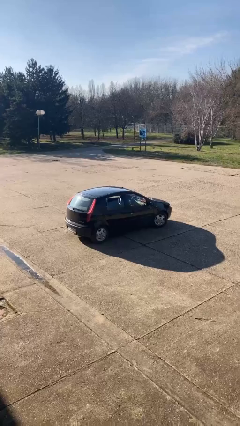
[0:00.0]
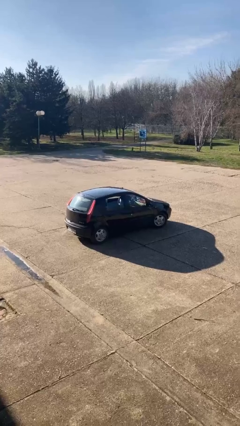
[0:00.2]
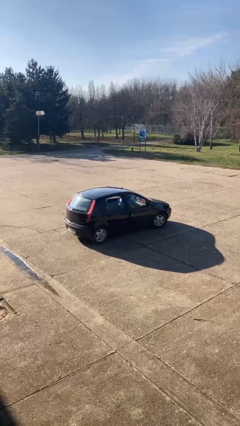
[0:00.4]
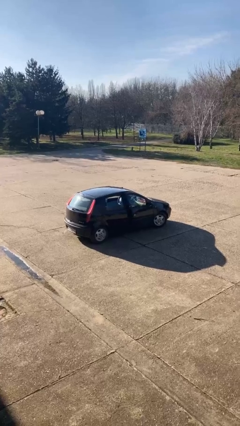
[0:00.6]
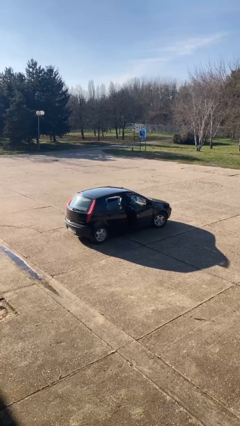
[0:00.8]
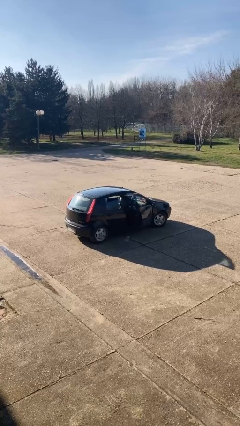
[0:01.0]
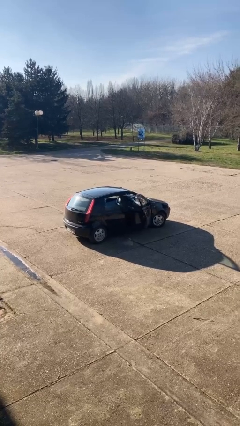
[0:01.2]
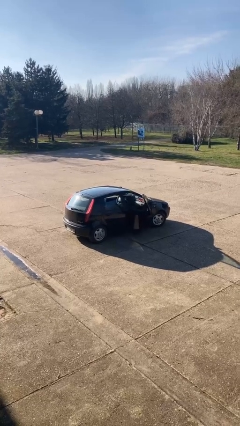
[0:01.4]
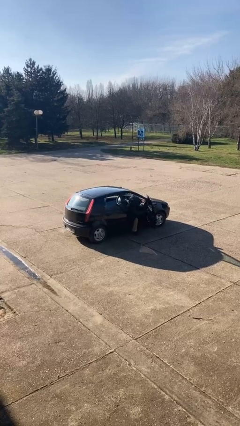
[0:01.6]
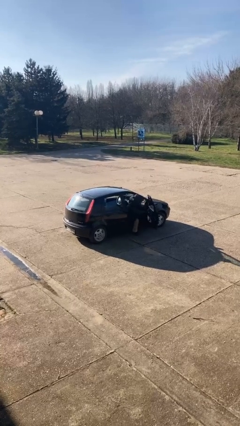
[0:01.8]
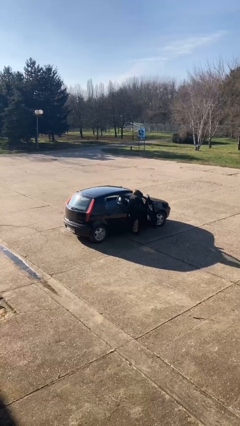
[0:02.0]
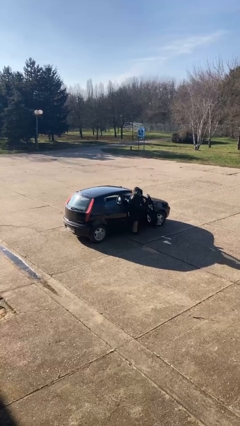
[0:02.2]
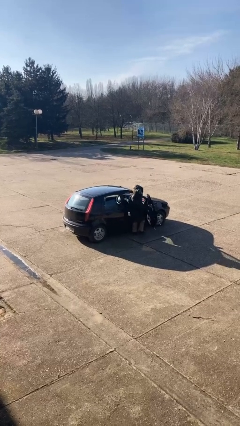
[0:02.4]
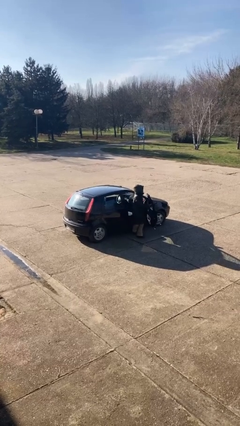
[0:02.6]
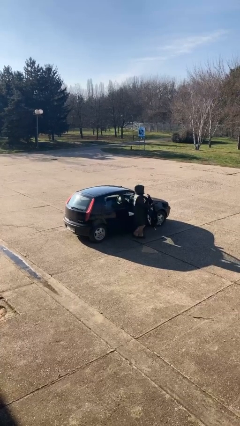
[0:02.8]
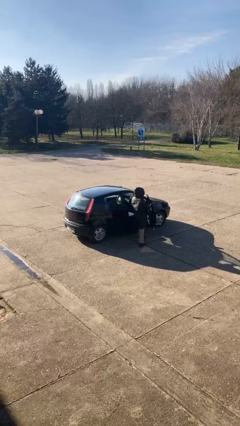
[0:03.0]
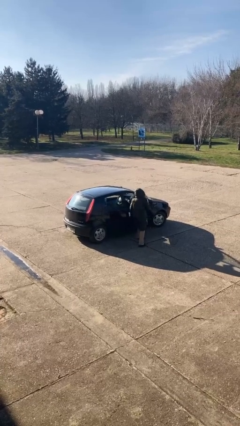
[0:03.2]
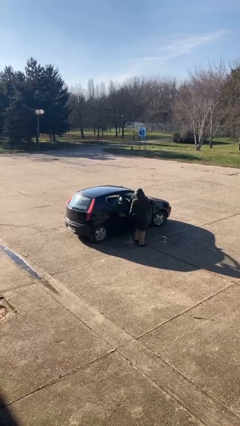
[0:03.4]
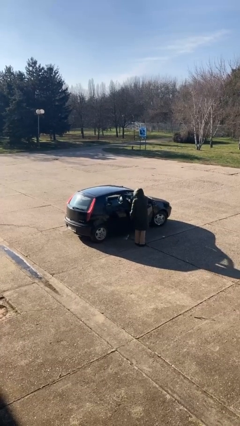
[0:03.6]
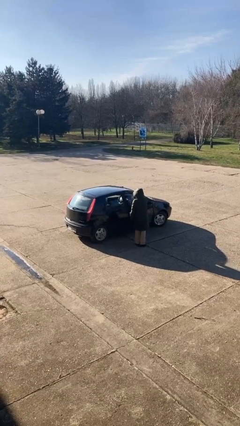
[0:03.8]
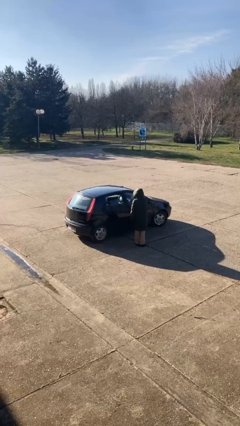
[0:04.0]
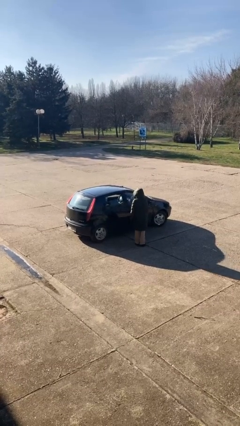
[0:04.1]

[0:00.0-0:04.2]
car drops off person

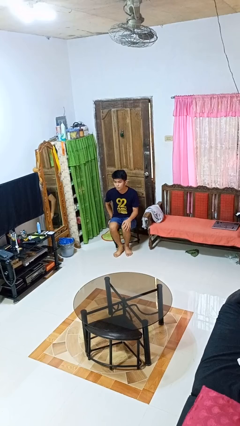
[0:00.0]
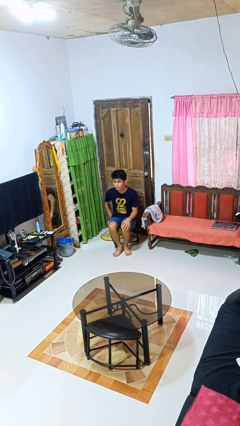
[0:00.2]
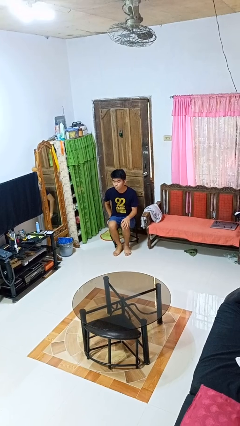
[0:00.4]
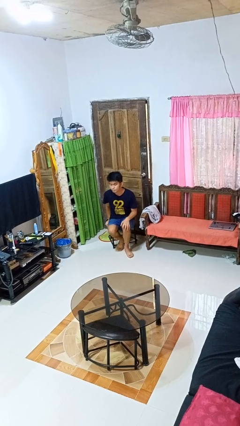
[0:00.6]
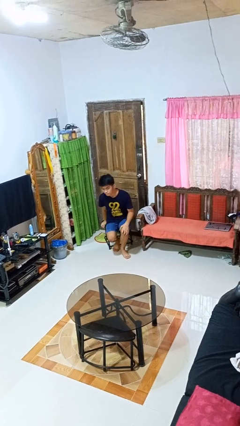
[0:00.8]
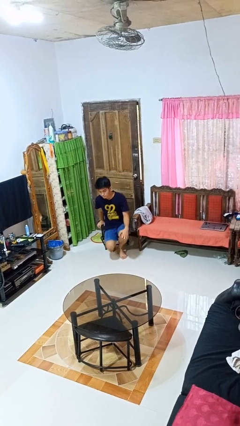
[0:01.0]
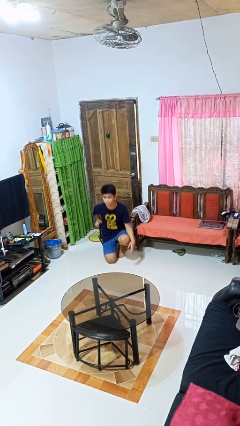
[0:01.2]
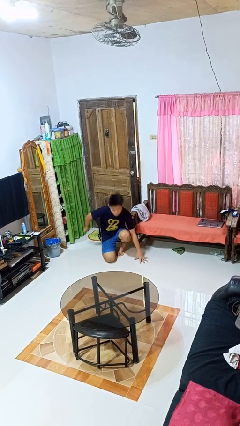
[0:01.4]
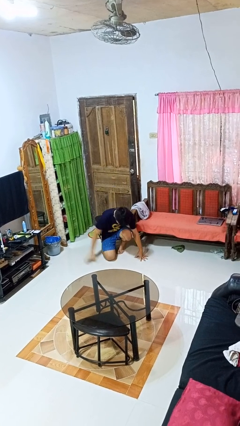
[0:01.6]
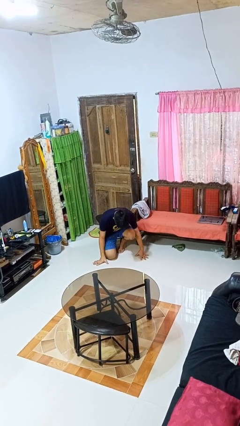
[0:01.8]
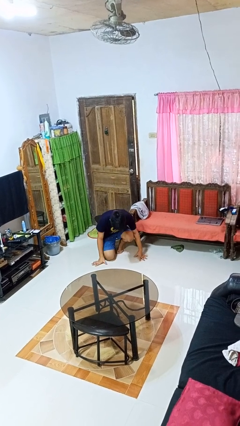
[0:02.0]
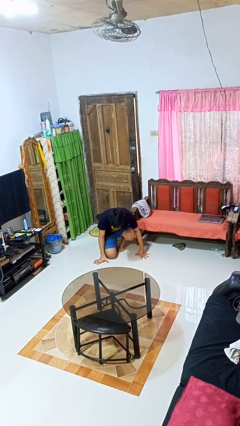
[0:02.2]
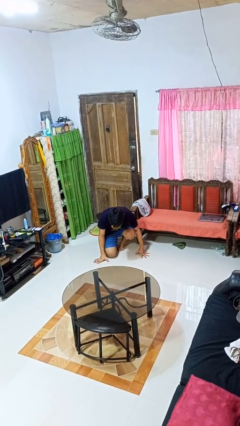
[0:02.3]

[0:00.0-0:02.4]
person falls from chair

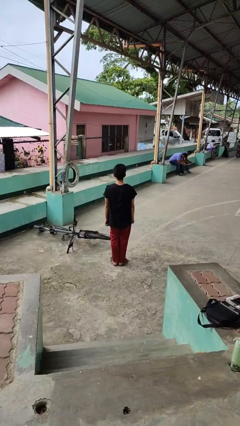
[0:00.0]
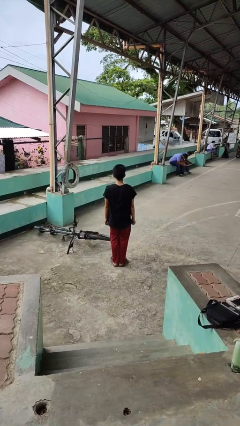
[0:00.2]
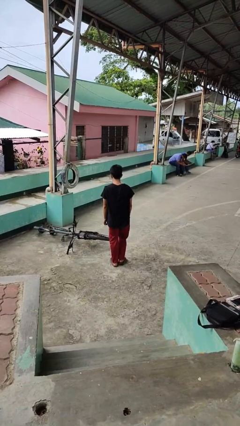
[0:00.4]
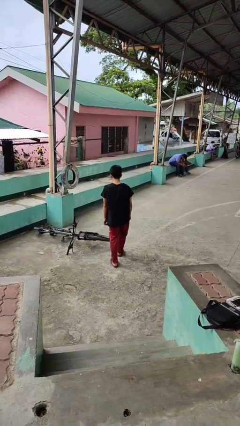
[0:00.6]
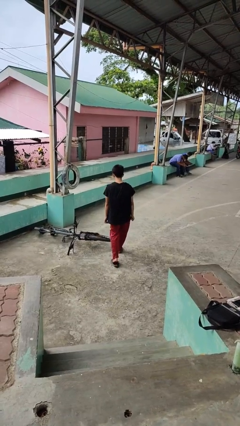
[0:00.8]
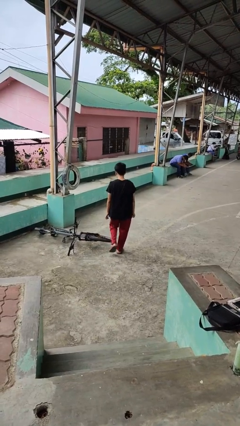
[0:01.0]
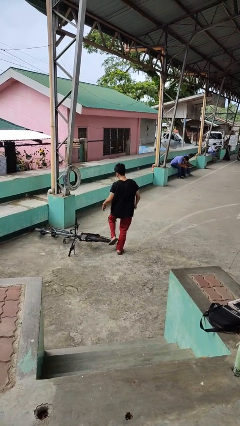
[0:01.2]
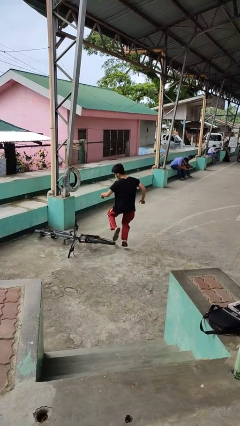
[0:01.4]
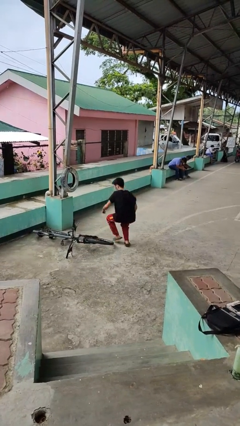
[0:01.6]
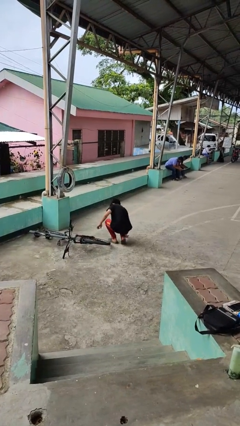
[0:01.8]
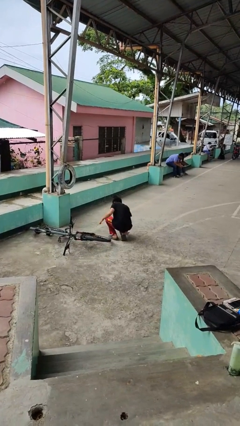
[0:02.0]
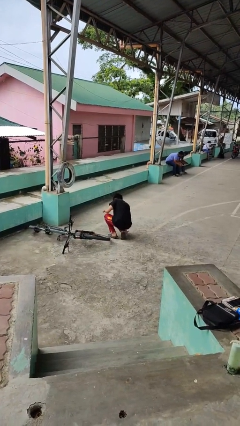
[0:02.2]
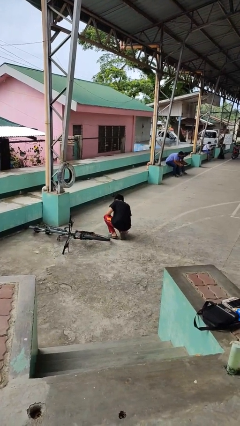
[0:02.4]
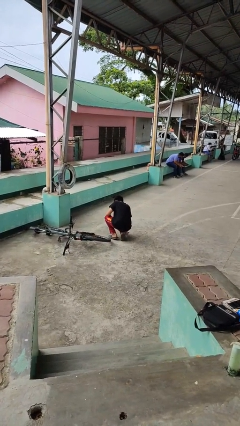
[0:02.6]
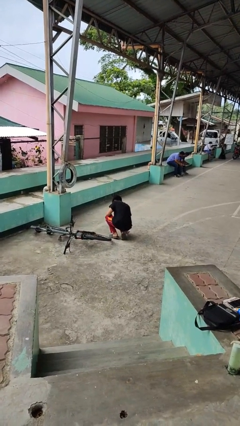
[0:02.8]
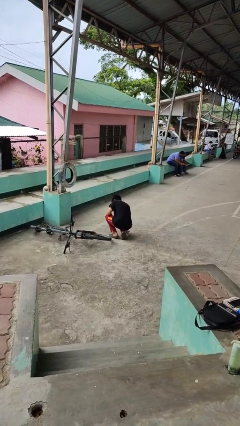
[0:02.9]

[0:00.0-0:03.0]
person trips on object on floor

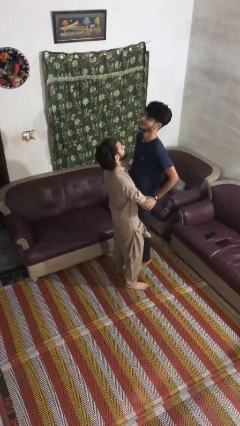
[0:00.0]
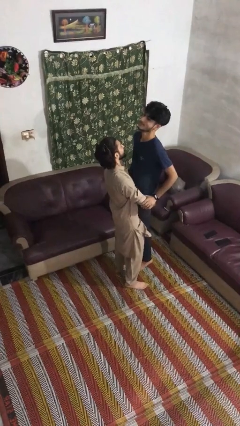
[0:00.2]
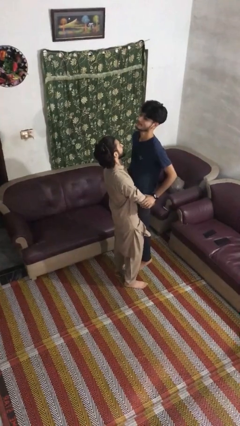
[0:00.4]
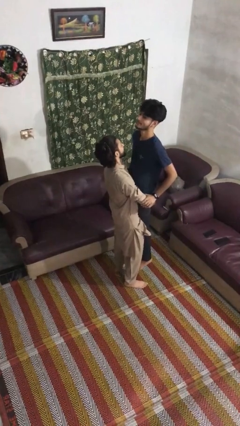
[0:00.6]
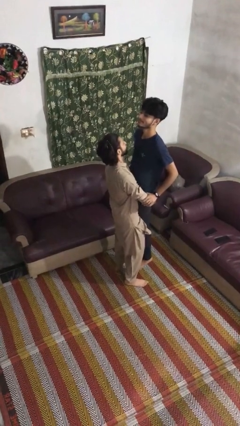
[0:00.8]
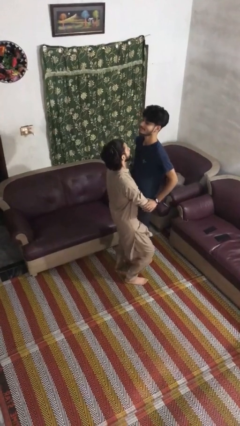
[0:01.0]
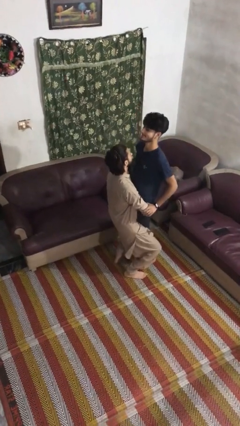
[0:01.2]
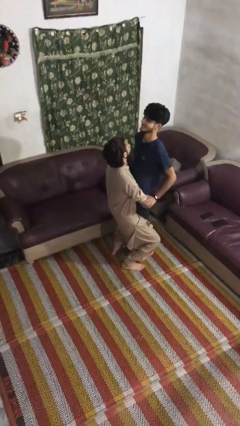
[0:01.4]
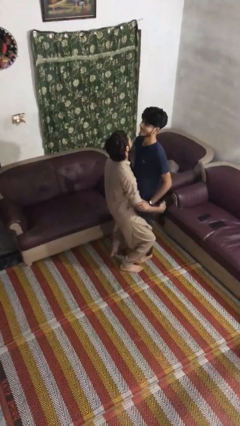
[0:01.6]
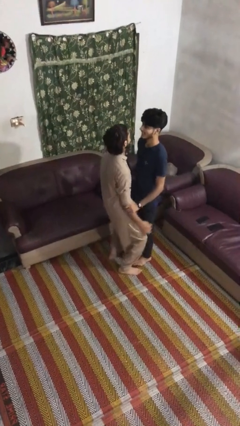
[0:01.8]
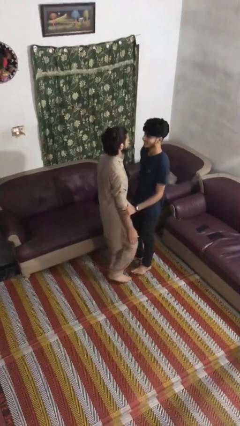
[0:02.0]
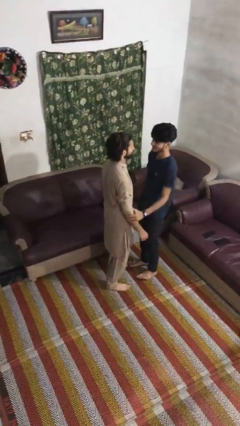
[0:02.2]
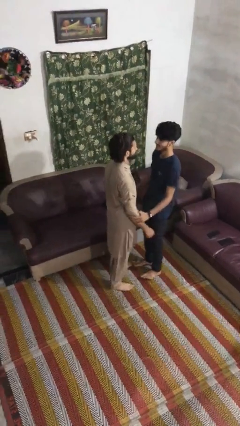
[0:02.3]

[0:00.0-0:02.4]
person puts down person

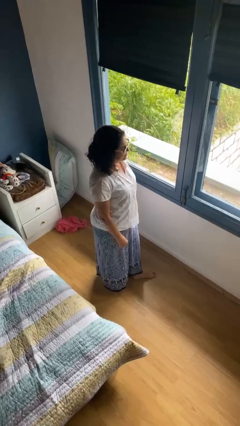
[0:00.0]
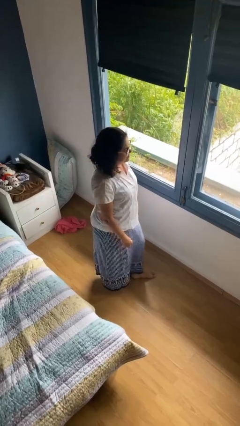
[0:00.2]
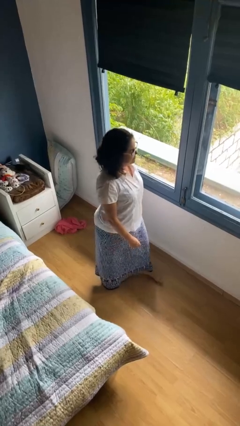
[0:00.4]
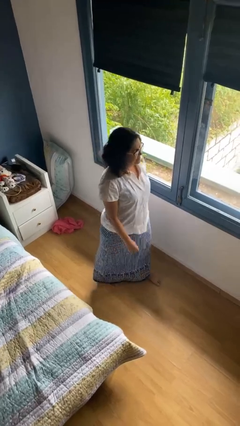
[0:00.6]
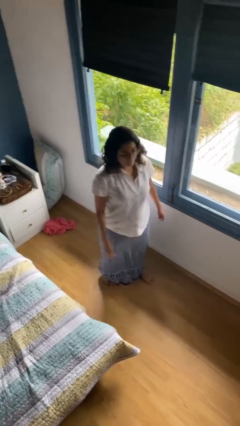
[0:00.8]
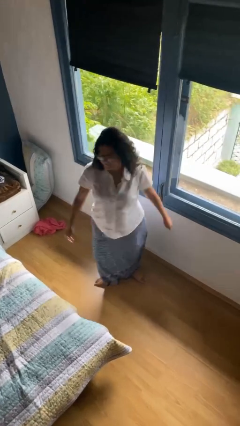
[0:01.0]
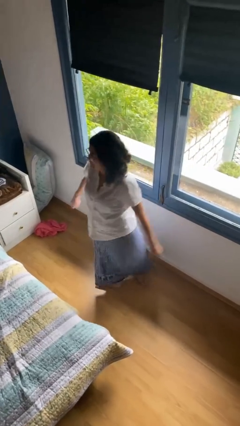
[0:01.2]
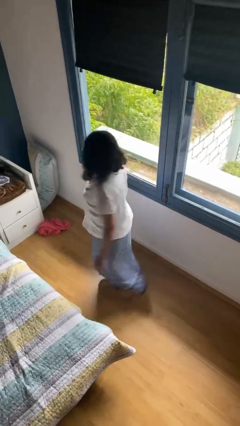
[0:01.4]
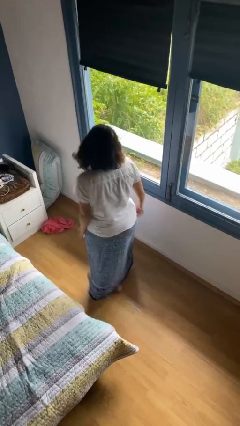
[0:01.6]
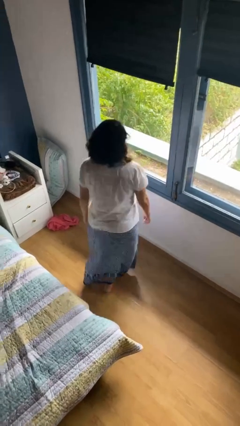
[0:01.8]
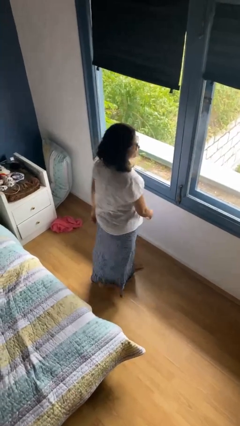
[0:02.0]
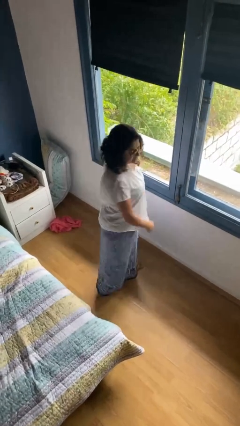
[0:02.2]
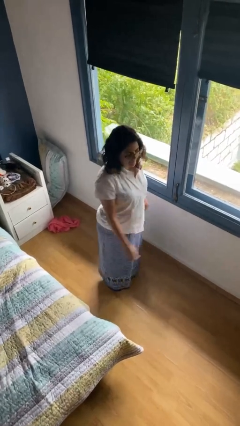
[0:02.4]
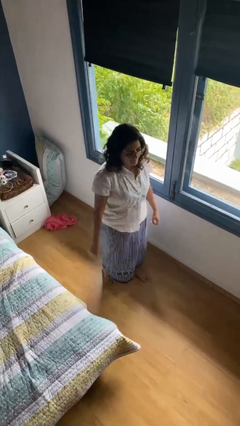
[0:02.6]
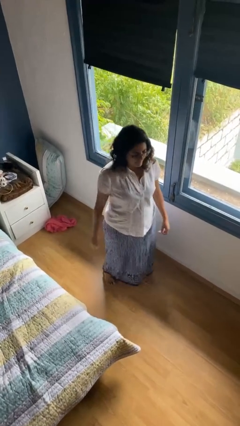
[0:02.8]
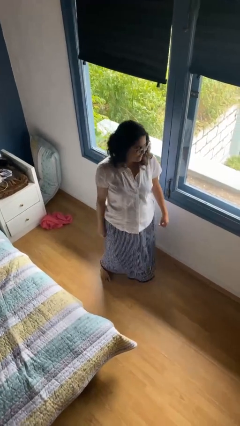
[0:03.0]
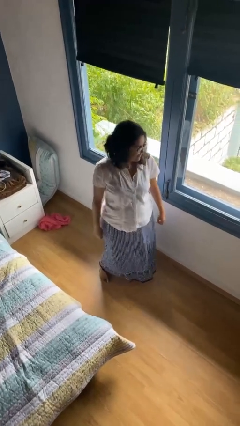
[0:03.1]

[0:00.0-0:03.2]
person twirls

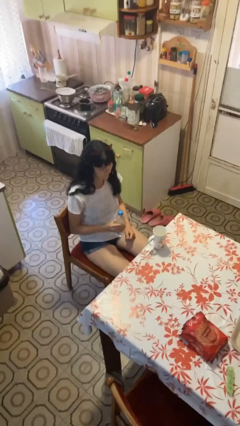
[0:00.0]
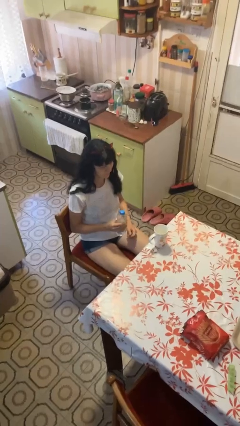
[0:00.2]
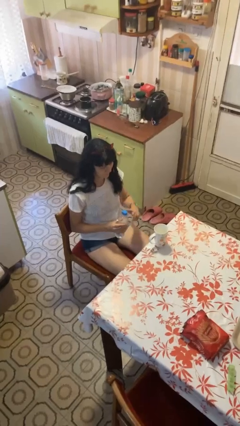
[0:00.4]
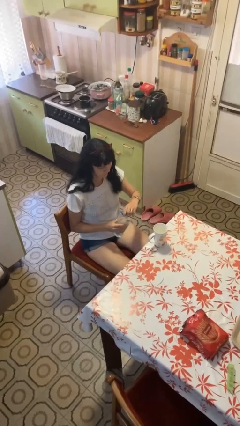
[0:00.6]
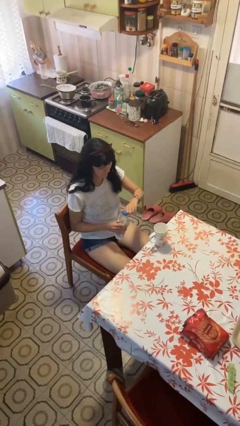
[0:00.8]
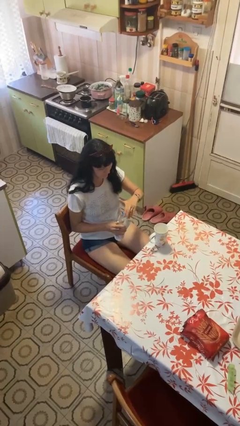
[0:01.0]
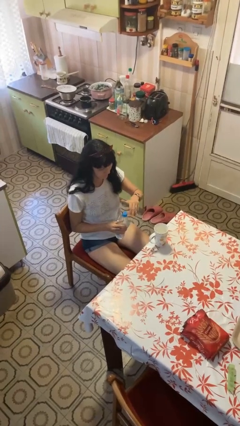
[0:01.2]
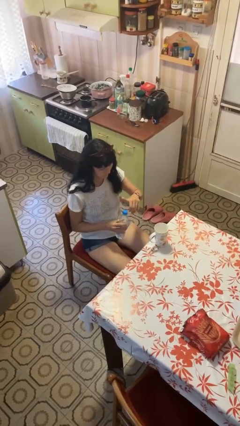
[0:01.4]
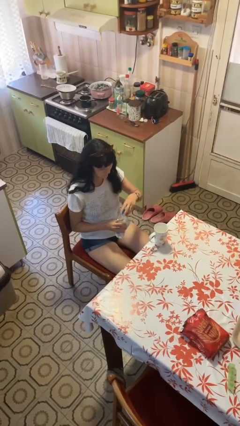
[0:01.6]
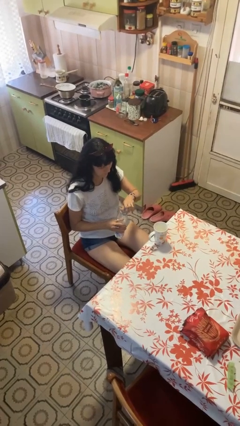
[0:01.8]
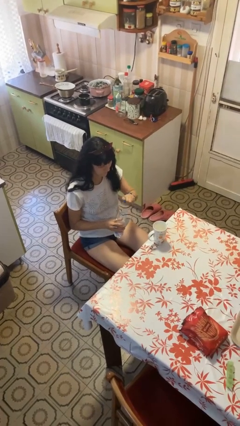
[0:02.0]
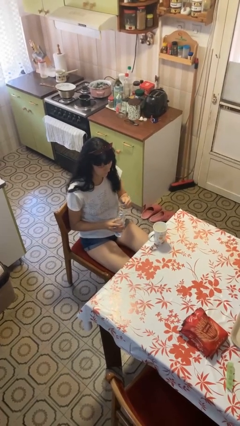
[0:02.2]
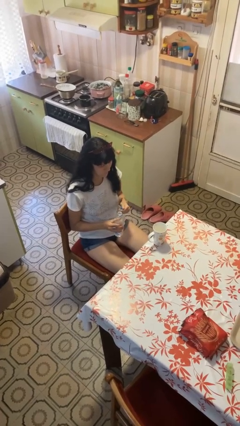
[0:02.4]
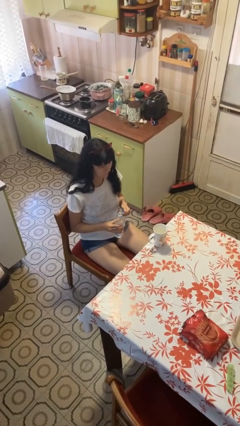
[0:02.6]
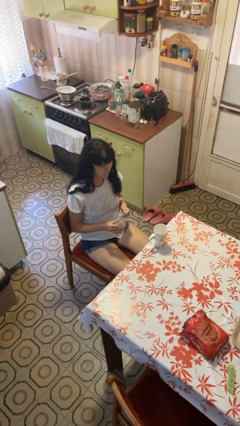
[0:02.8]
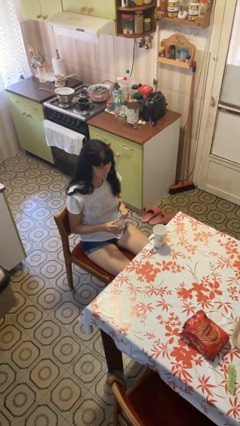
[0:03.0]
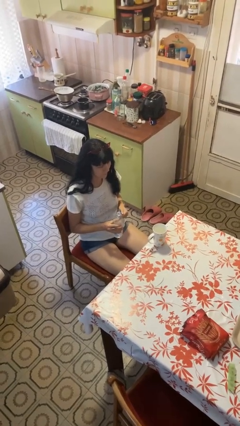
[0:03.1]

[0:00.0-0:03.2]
person unscrews lid from bottle
